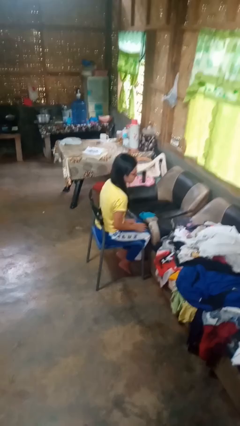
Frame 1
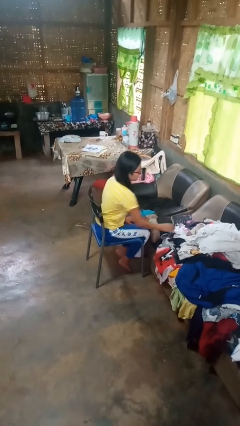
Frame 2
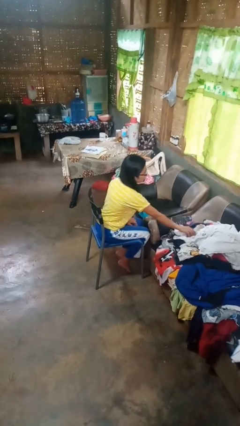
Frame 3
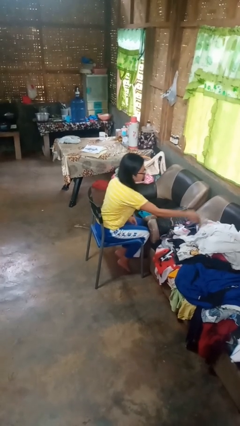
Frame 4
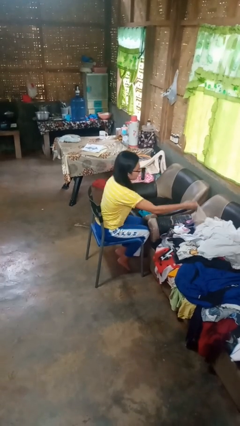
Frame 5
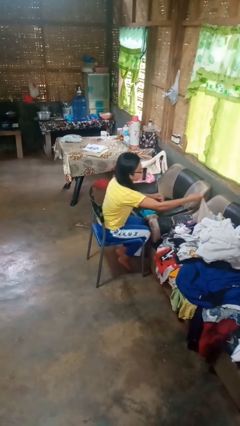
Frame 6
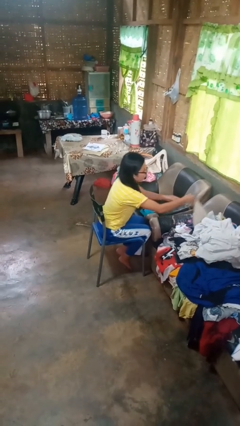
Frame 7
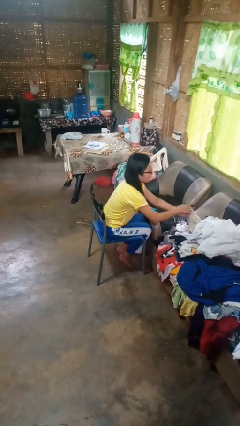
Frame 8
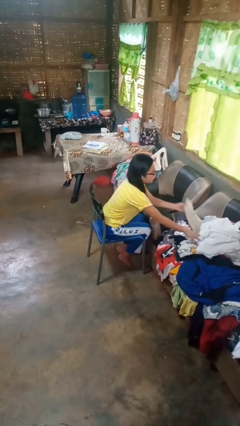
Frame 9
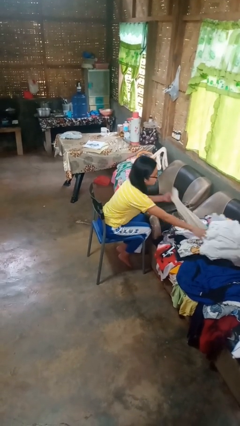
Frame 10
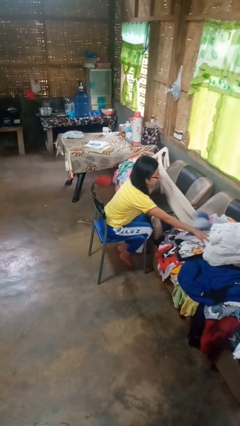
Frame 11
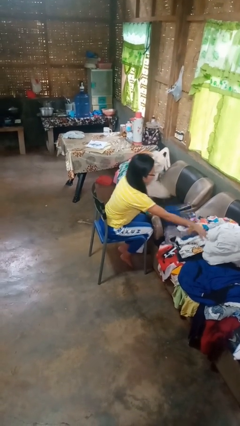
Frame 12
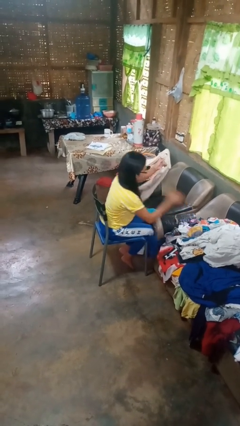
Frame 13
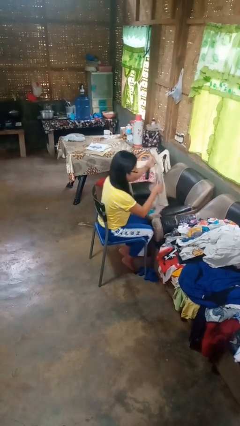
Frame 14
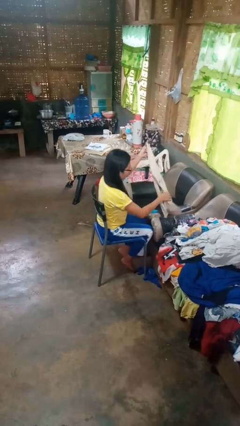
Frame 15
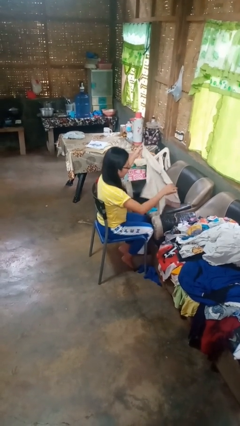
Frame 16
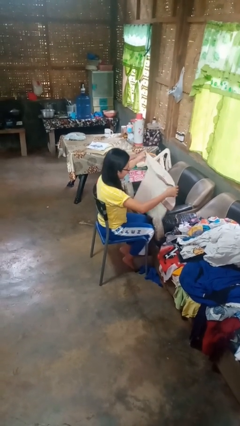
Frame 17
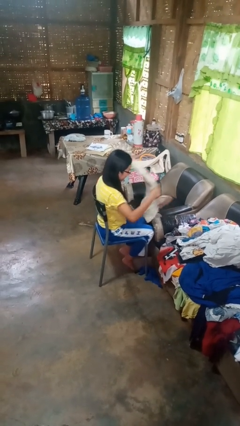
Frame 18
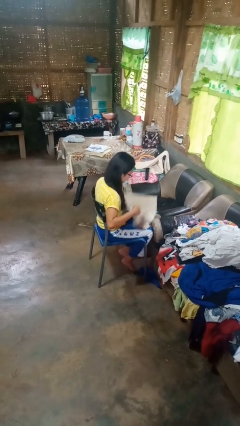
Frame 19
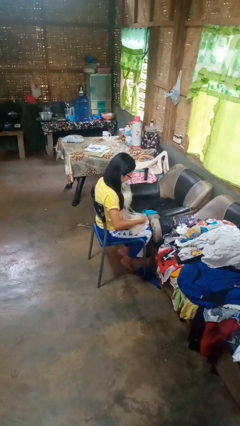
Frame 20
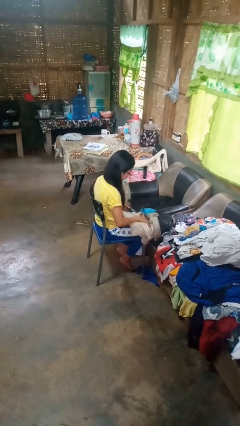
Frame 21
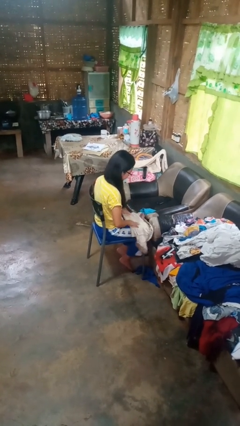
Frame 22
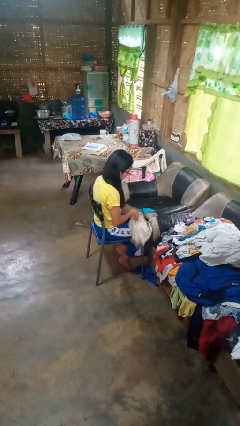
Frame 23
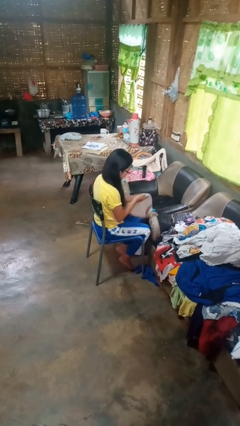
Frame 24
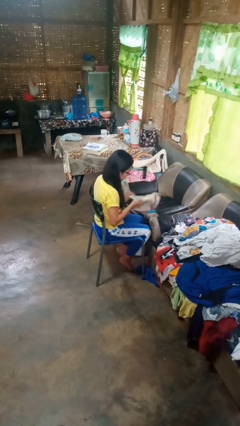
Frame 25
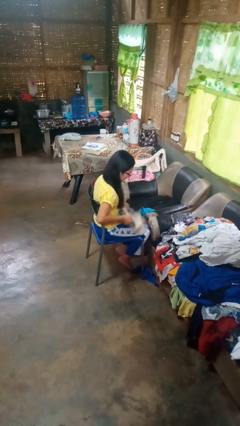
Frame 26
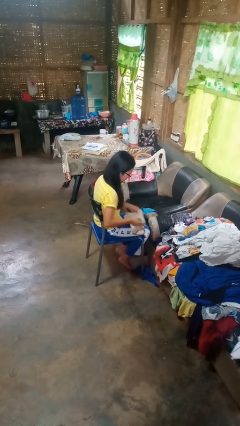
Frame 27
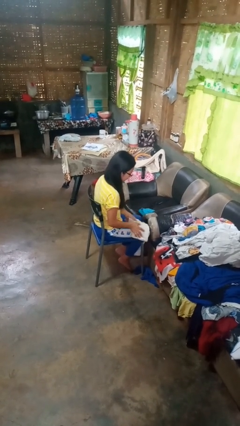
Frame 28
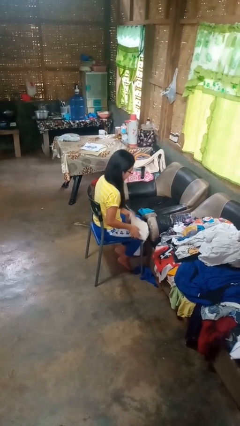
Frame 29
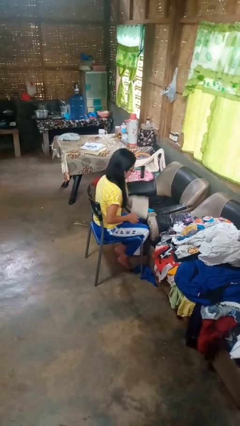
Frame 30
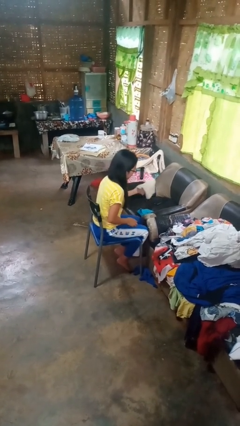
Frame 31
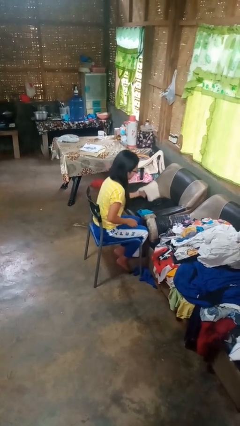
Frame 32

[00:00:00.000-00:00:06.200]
person folds shirt

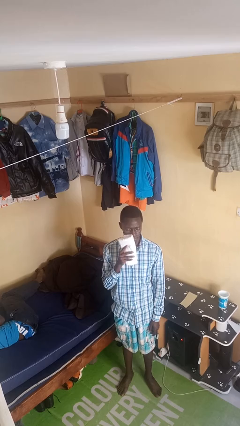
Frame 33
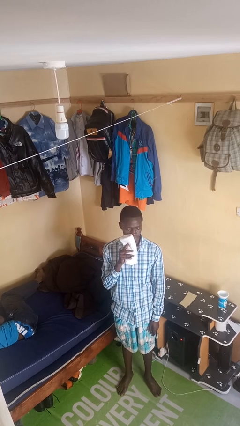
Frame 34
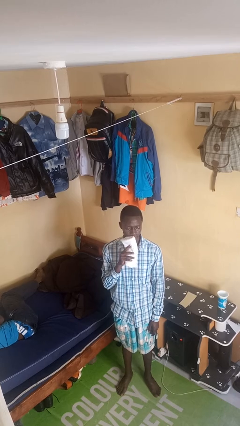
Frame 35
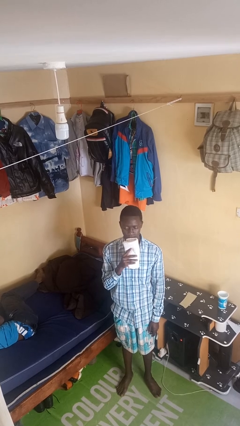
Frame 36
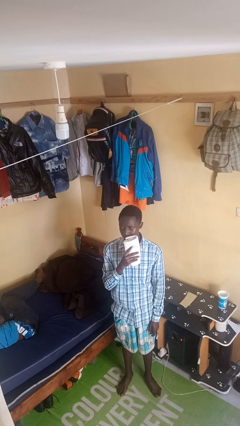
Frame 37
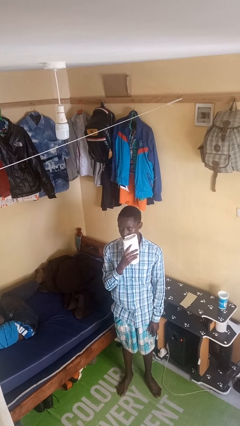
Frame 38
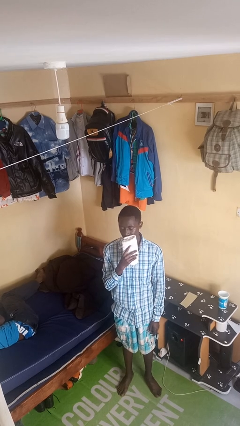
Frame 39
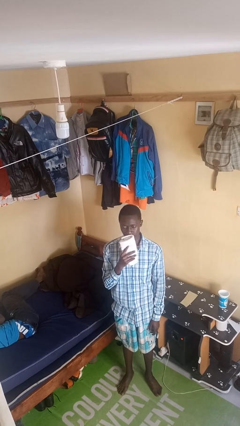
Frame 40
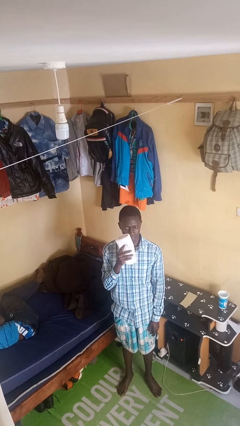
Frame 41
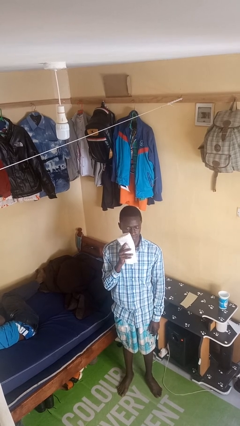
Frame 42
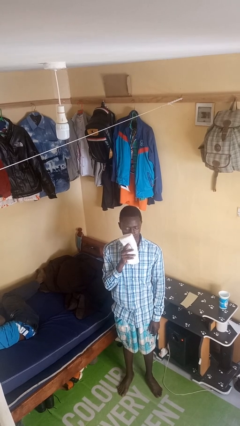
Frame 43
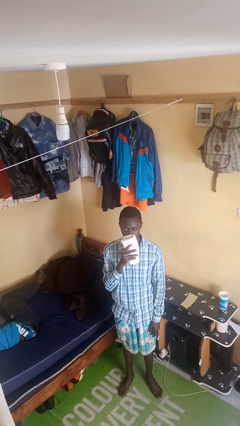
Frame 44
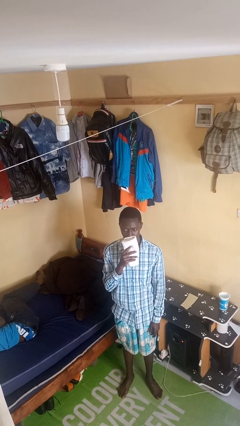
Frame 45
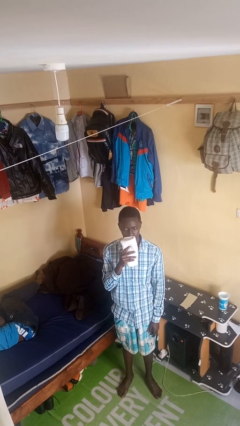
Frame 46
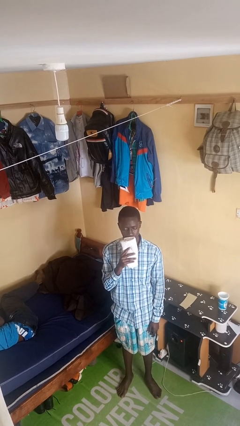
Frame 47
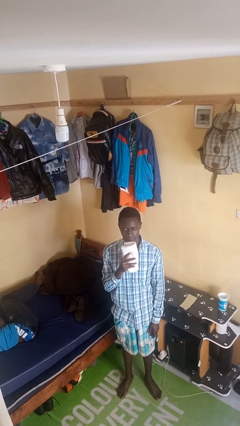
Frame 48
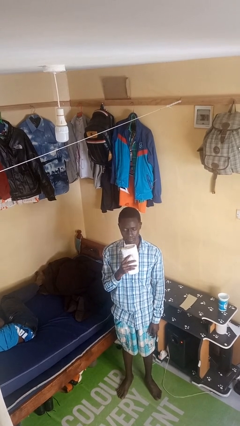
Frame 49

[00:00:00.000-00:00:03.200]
person wipes mouth with napkin

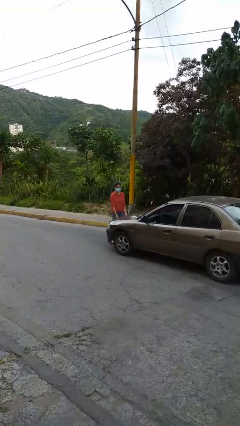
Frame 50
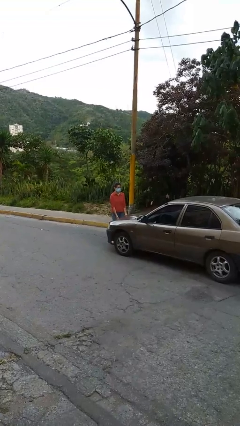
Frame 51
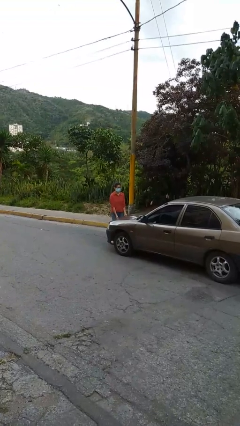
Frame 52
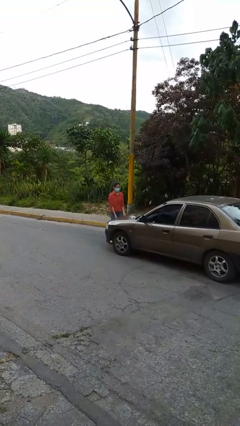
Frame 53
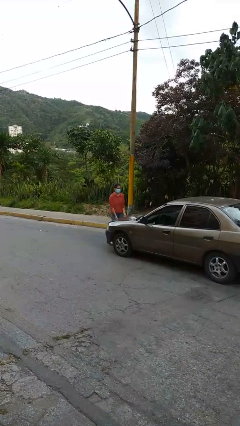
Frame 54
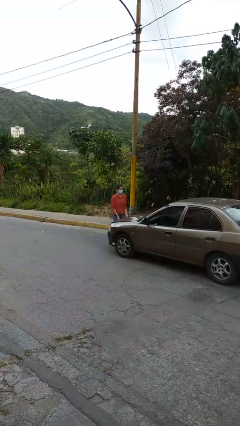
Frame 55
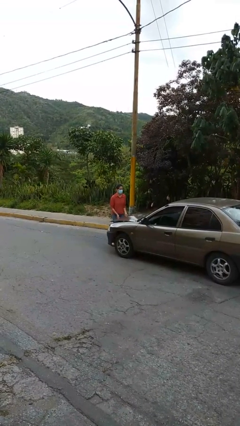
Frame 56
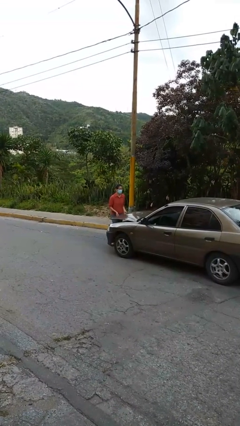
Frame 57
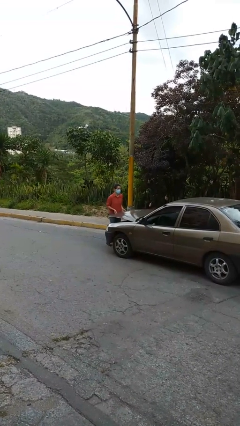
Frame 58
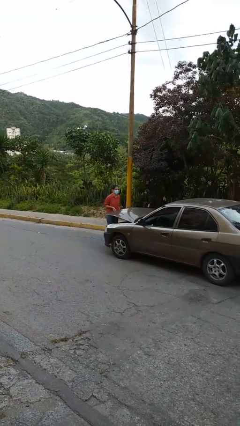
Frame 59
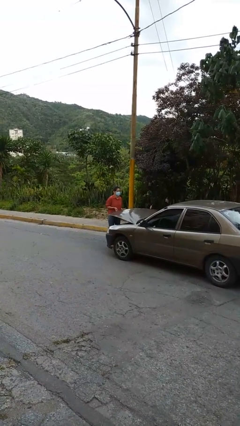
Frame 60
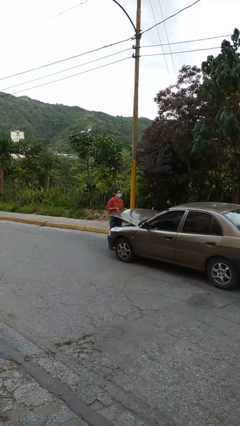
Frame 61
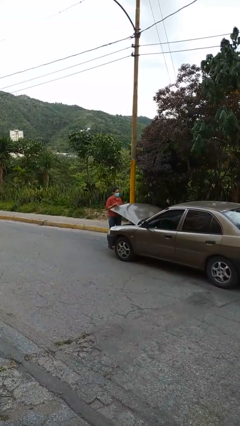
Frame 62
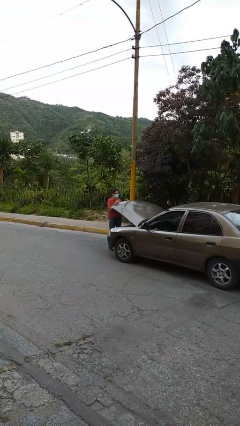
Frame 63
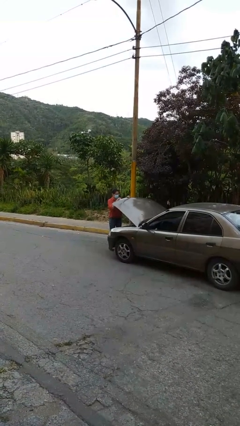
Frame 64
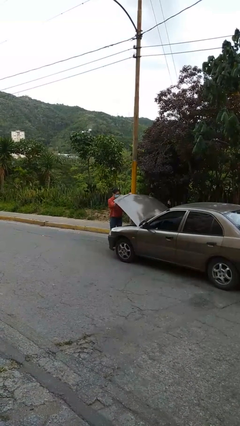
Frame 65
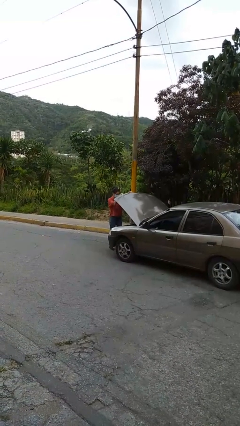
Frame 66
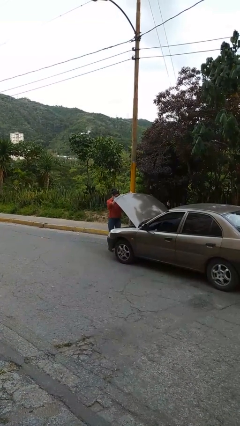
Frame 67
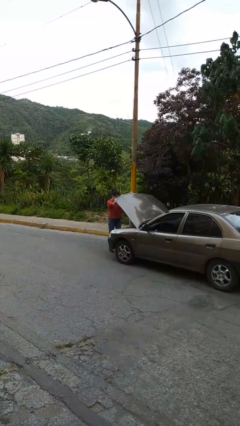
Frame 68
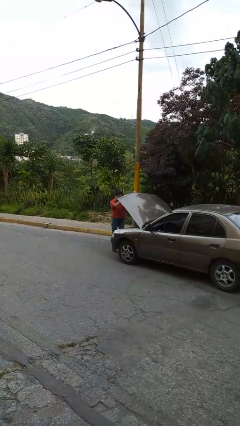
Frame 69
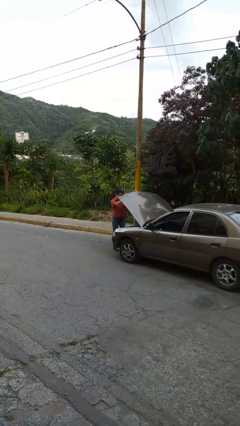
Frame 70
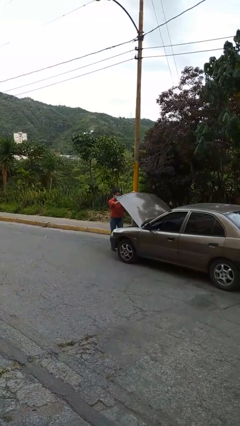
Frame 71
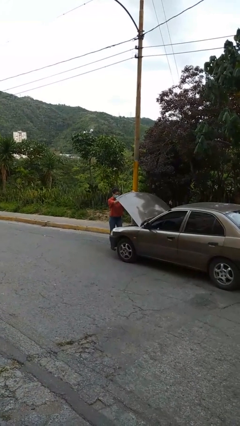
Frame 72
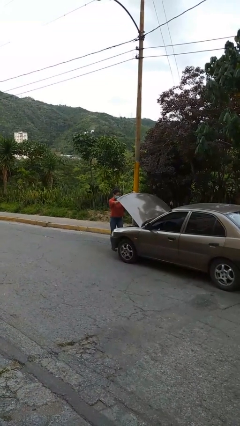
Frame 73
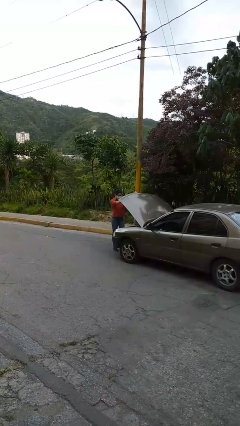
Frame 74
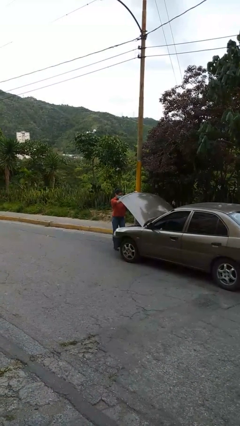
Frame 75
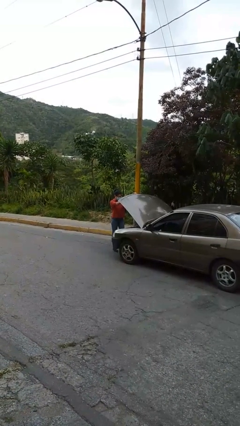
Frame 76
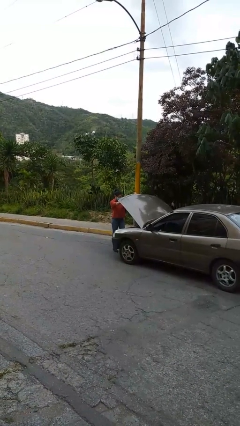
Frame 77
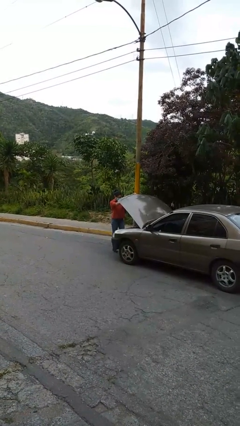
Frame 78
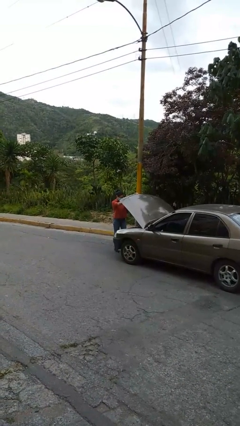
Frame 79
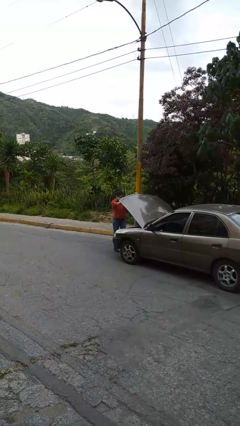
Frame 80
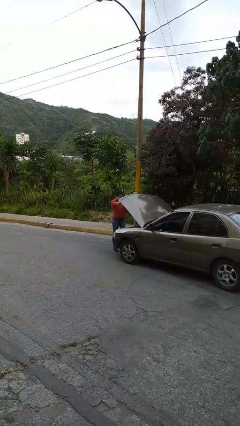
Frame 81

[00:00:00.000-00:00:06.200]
person opens car hood

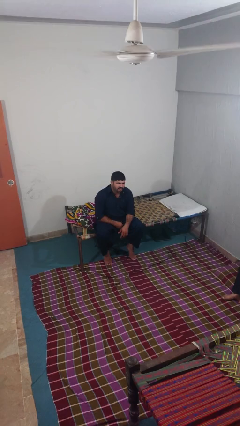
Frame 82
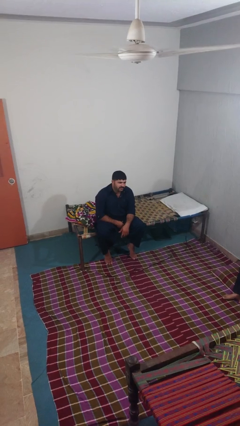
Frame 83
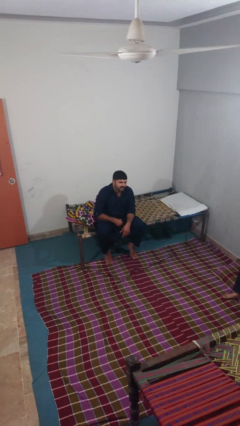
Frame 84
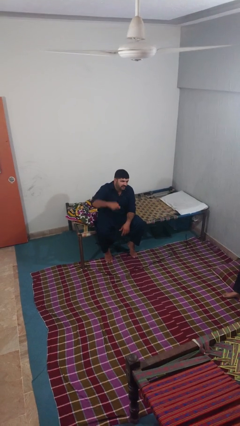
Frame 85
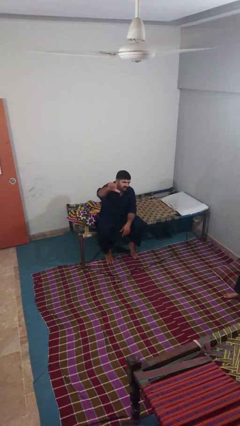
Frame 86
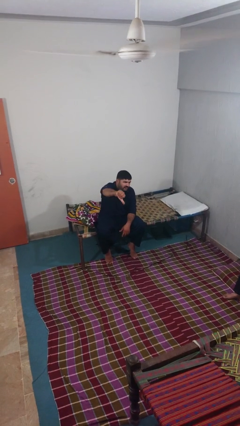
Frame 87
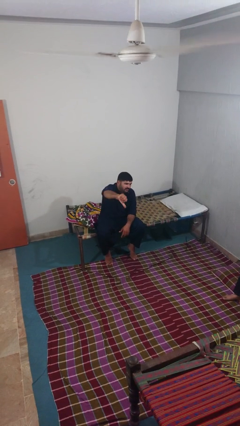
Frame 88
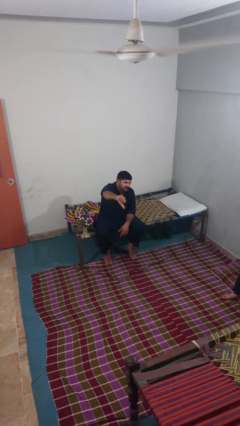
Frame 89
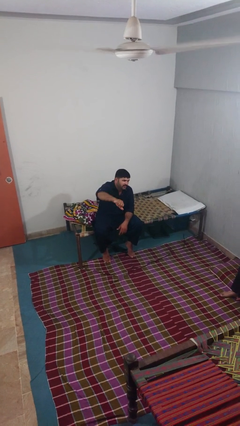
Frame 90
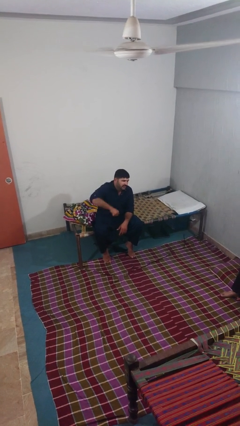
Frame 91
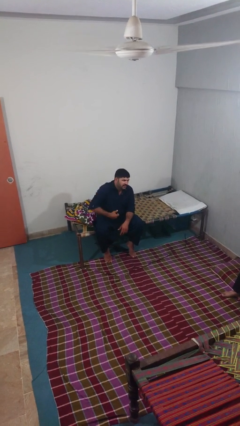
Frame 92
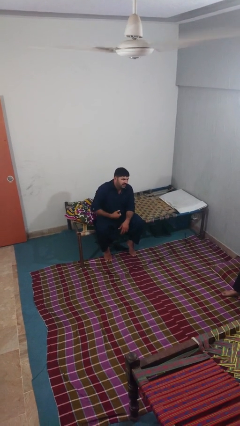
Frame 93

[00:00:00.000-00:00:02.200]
person gestures thumbs down
